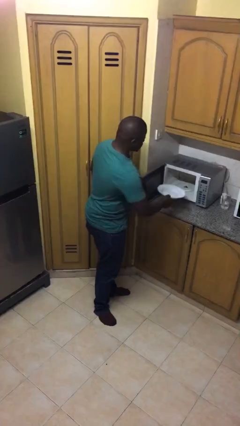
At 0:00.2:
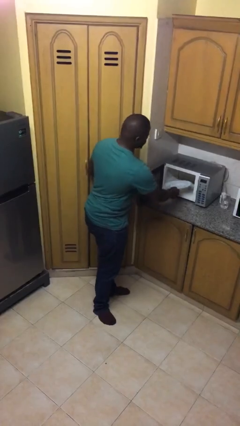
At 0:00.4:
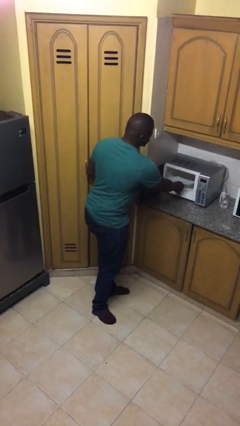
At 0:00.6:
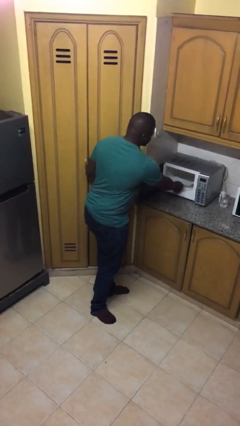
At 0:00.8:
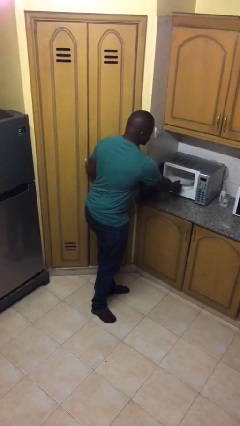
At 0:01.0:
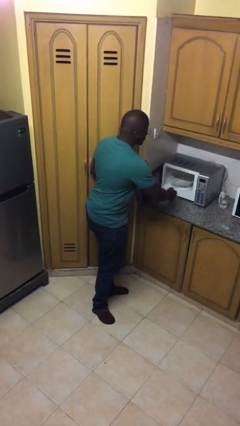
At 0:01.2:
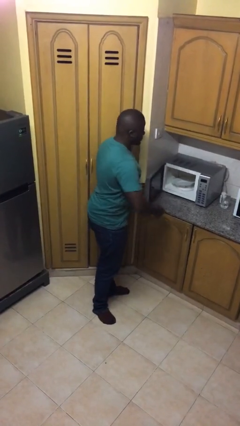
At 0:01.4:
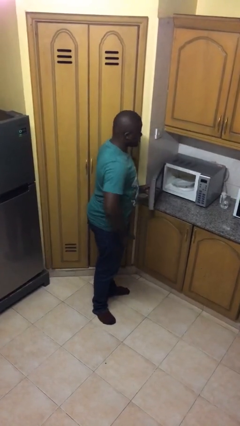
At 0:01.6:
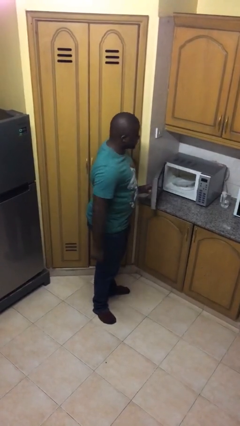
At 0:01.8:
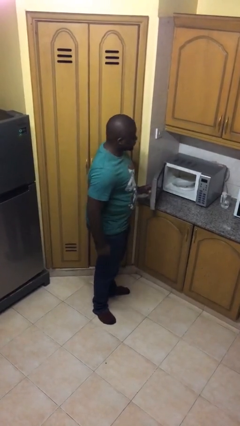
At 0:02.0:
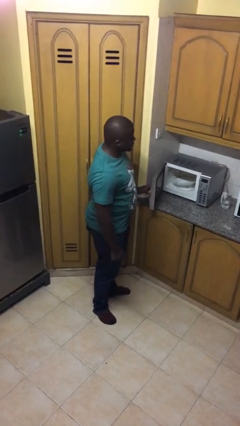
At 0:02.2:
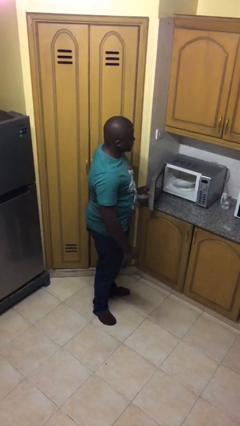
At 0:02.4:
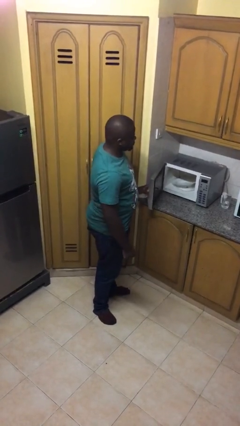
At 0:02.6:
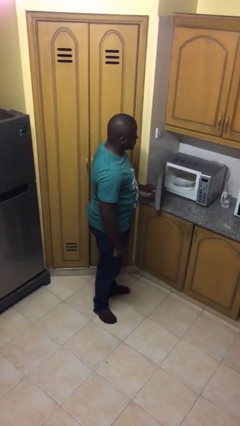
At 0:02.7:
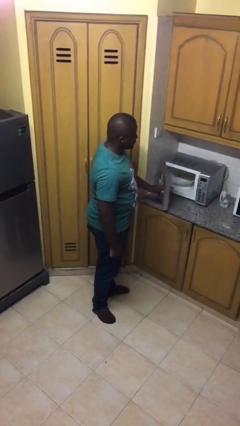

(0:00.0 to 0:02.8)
person puts object into microwave

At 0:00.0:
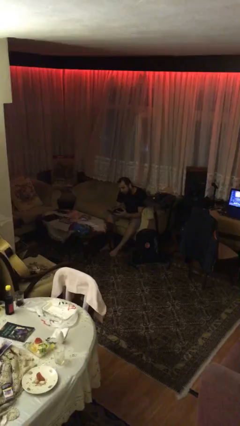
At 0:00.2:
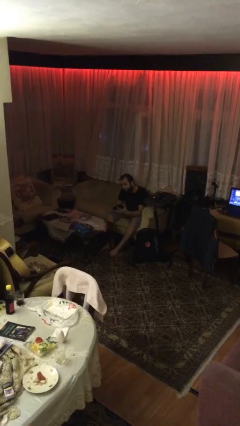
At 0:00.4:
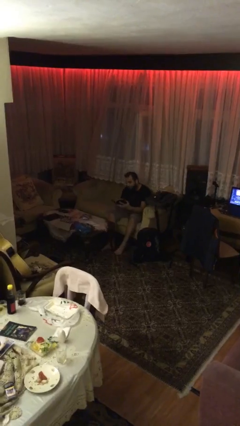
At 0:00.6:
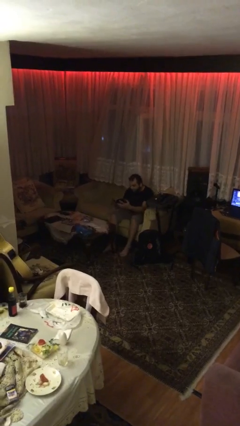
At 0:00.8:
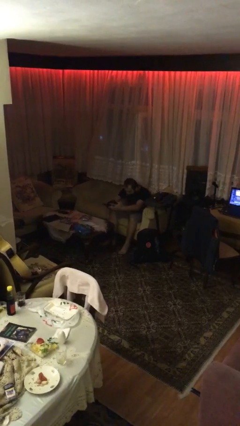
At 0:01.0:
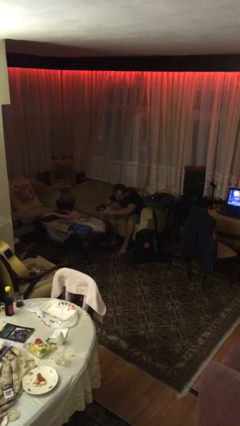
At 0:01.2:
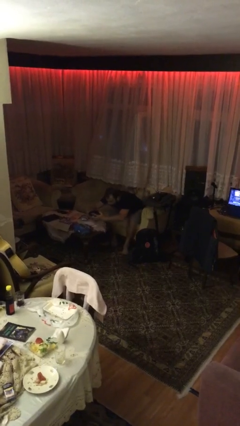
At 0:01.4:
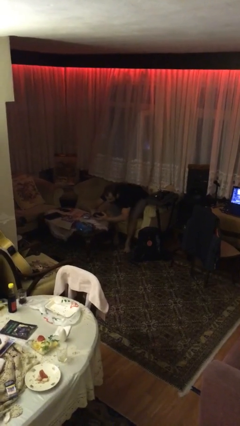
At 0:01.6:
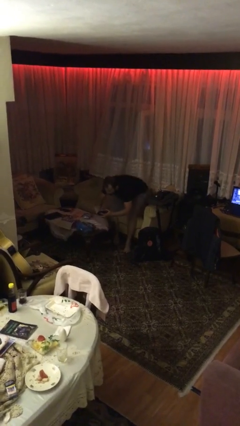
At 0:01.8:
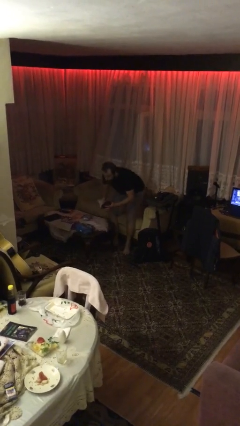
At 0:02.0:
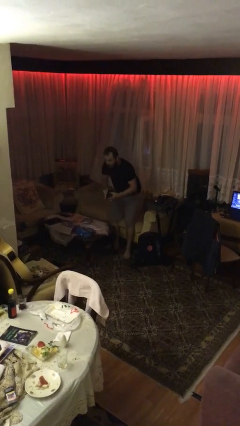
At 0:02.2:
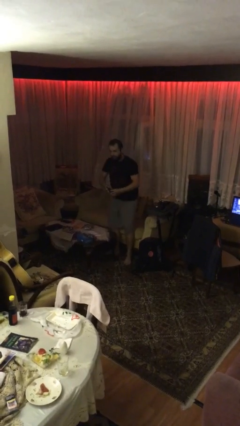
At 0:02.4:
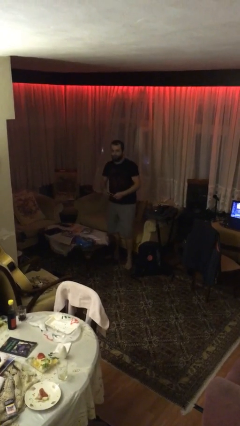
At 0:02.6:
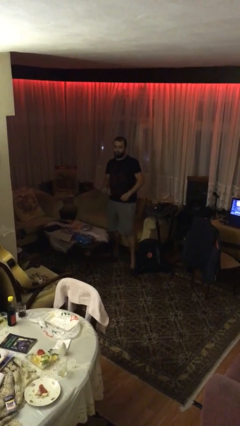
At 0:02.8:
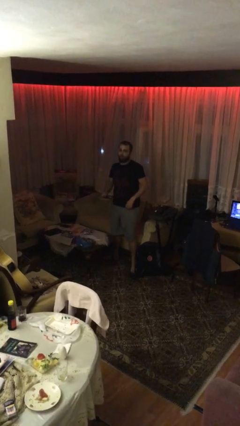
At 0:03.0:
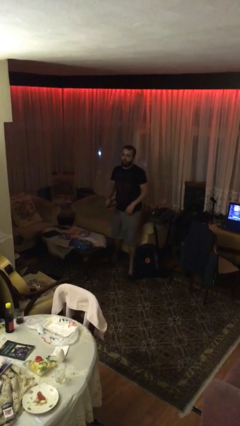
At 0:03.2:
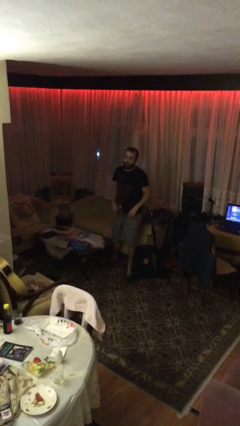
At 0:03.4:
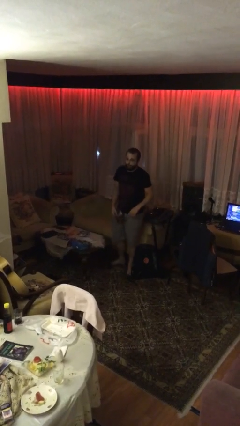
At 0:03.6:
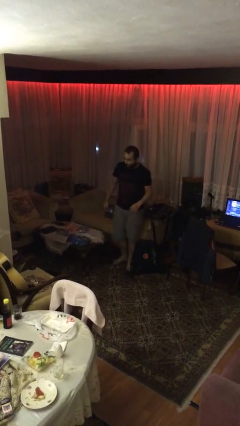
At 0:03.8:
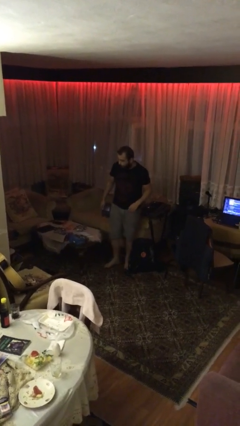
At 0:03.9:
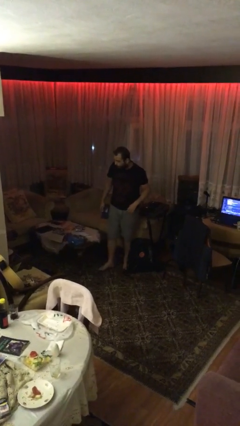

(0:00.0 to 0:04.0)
person stands up

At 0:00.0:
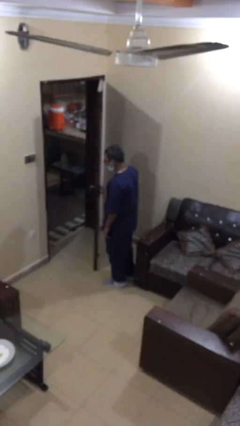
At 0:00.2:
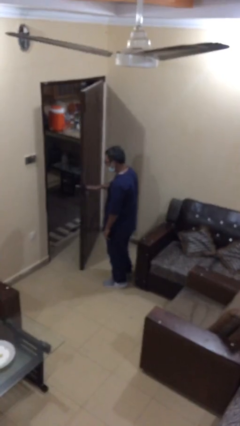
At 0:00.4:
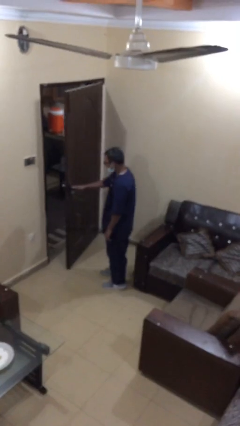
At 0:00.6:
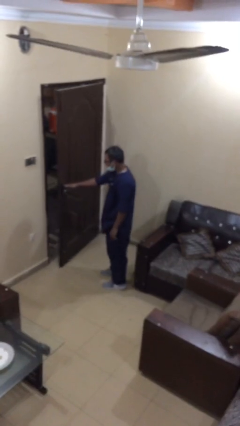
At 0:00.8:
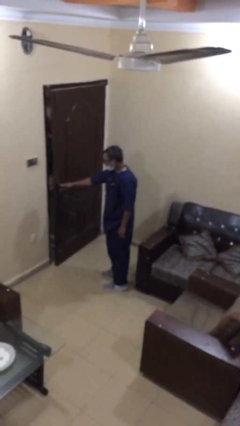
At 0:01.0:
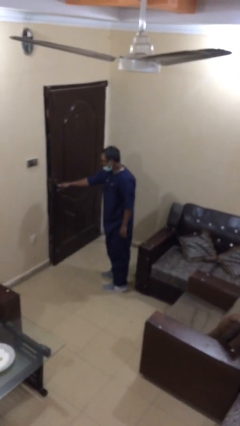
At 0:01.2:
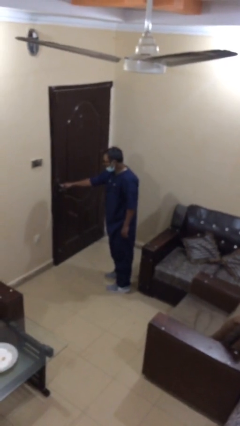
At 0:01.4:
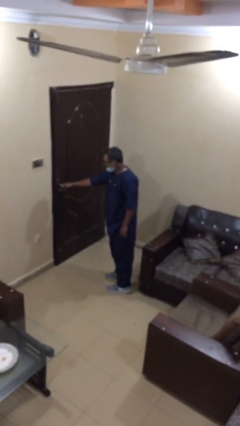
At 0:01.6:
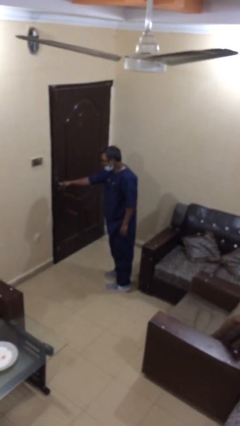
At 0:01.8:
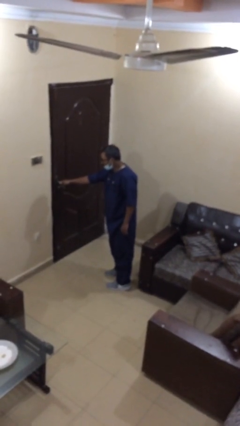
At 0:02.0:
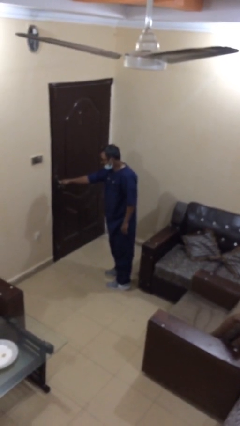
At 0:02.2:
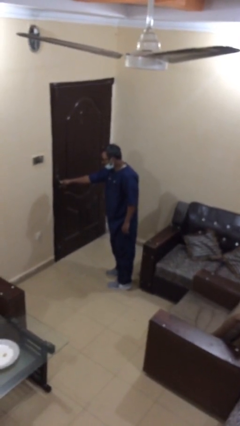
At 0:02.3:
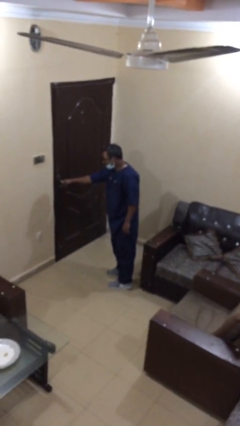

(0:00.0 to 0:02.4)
person closes facility door

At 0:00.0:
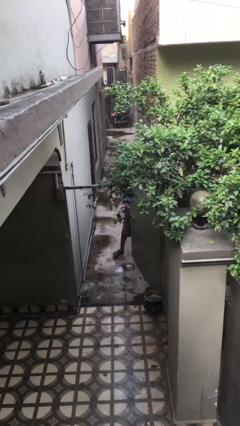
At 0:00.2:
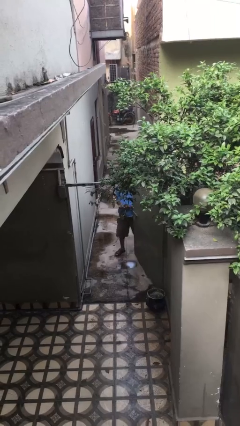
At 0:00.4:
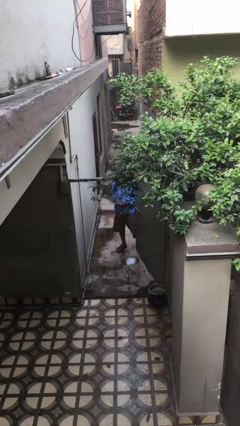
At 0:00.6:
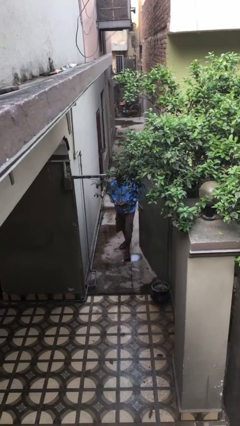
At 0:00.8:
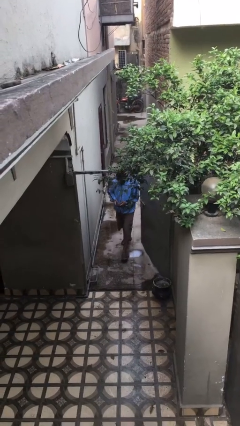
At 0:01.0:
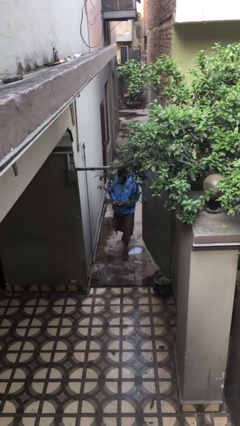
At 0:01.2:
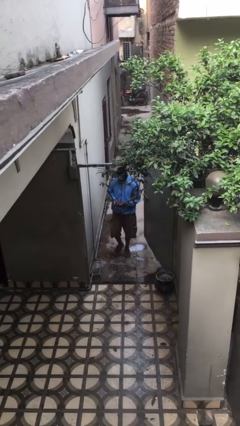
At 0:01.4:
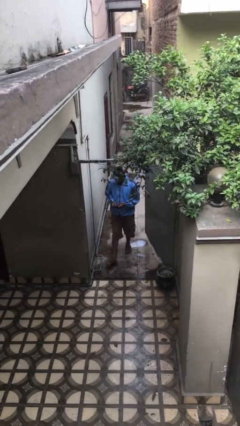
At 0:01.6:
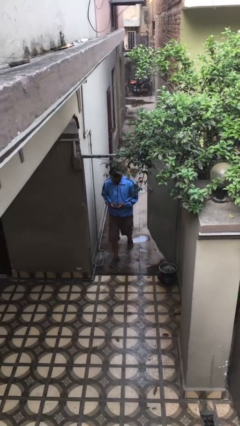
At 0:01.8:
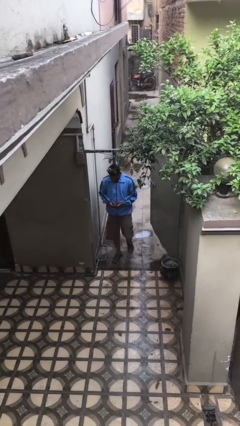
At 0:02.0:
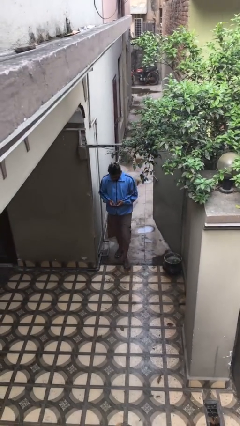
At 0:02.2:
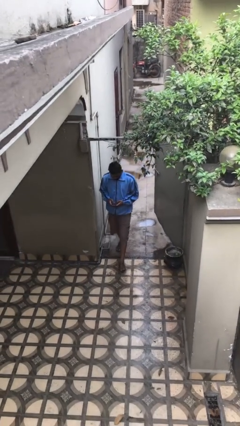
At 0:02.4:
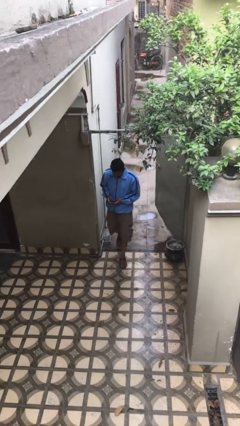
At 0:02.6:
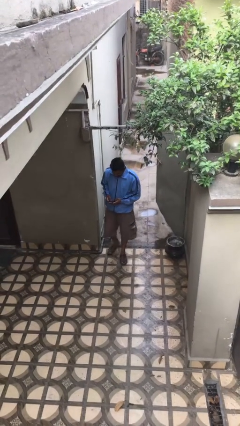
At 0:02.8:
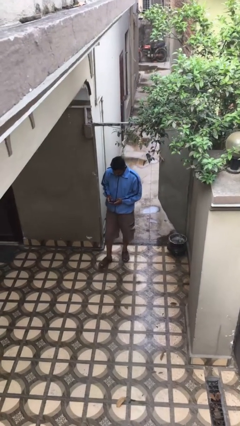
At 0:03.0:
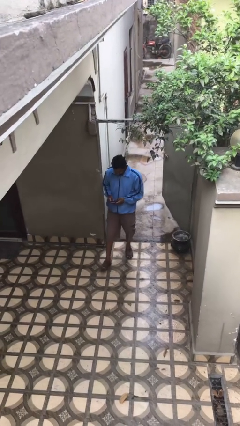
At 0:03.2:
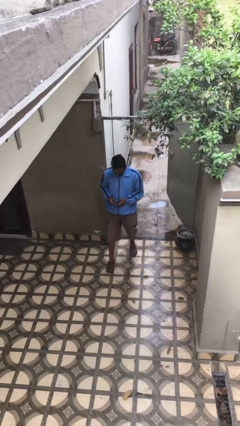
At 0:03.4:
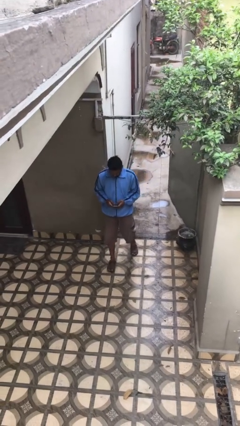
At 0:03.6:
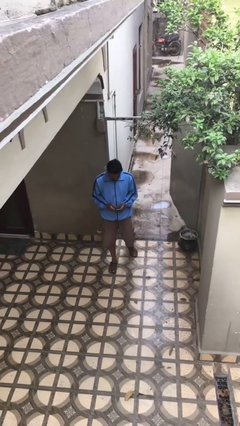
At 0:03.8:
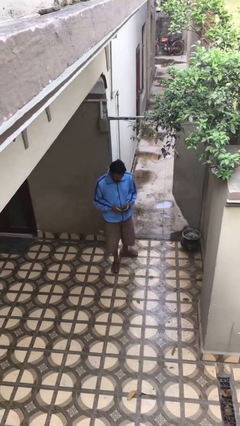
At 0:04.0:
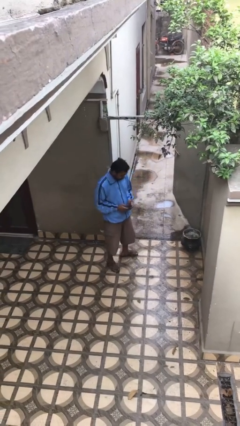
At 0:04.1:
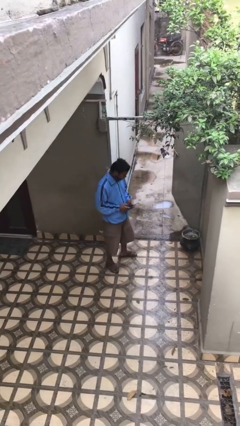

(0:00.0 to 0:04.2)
person enters scene through structure

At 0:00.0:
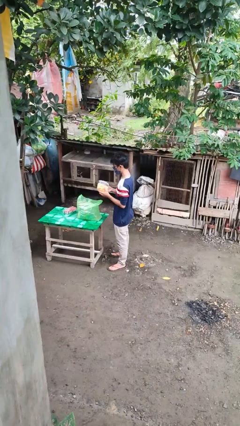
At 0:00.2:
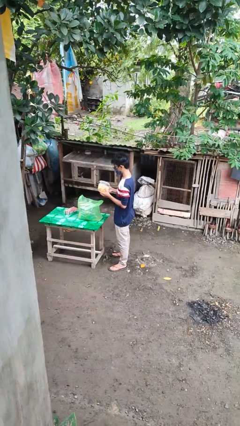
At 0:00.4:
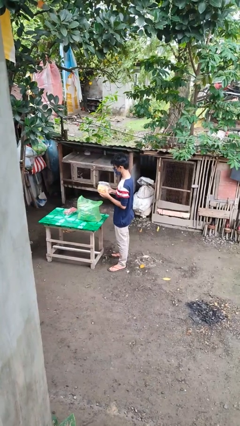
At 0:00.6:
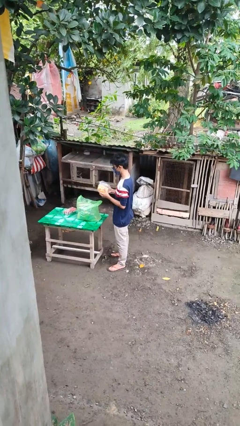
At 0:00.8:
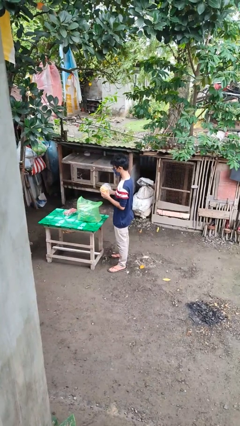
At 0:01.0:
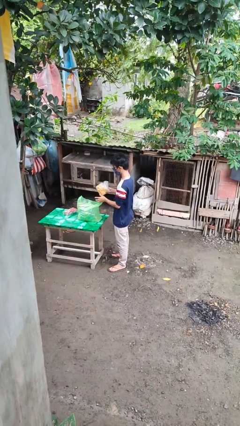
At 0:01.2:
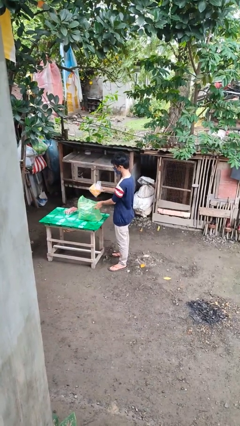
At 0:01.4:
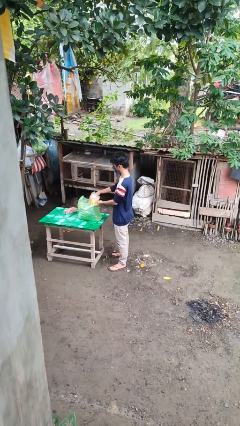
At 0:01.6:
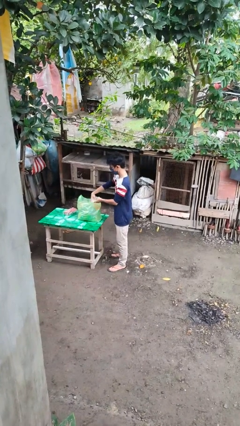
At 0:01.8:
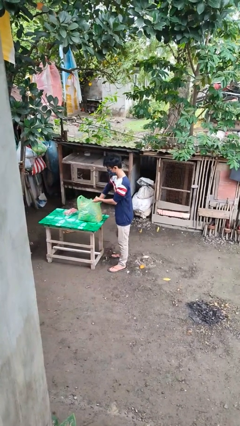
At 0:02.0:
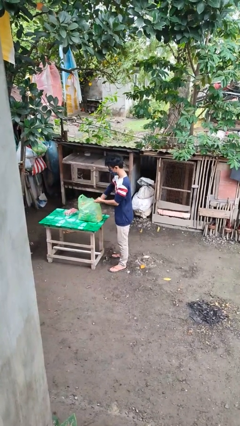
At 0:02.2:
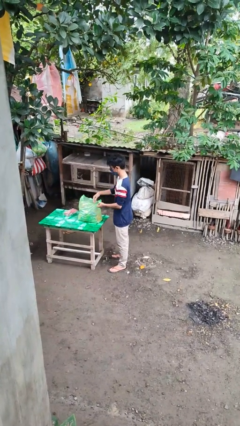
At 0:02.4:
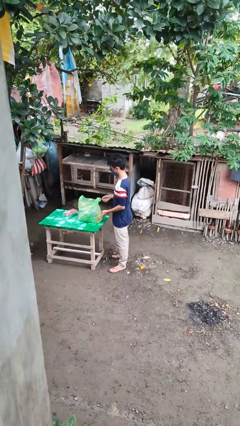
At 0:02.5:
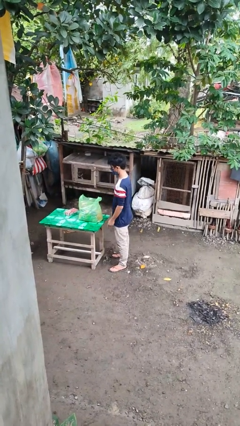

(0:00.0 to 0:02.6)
person puts object into bag

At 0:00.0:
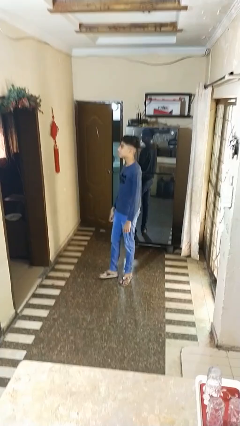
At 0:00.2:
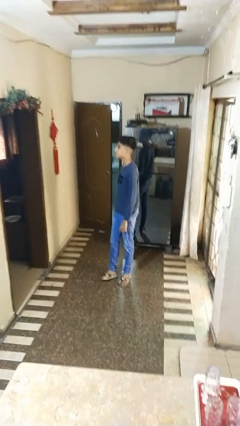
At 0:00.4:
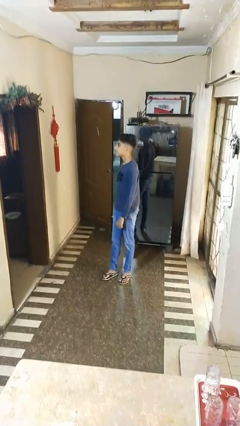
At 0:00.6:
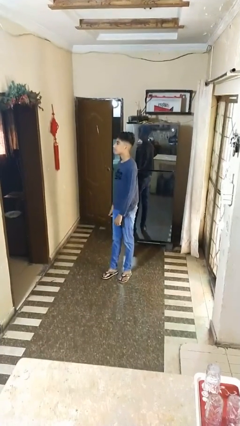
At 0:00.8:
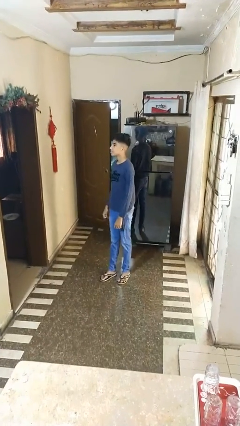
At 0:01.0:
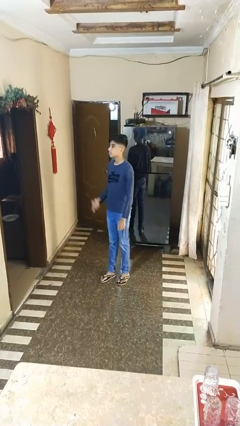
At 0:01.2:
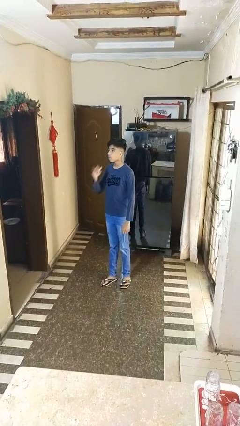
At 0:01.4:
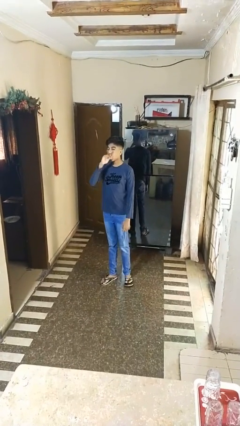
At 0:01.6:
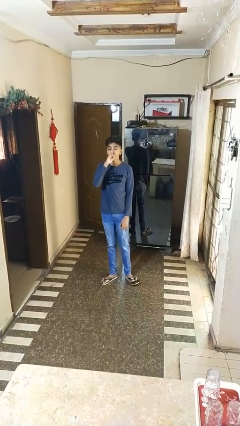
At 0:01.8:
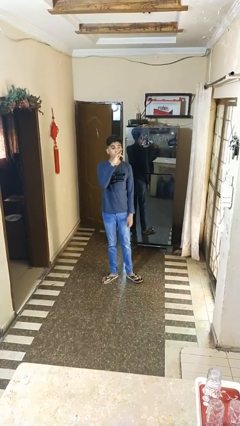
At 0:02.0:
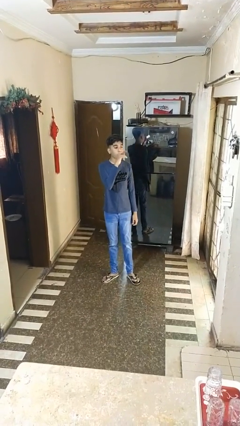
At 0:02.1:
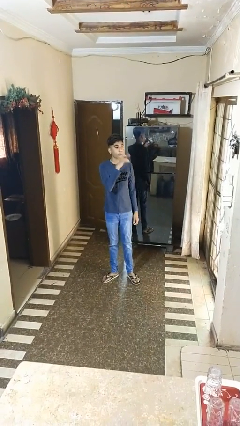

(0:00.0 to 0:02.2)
person vapes
